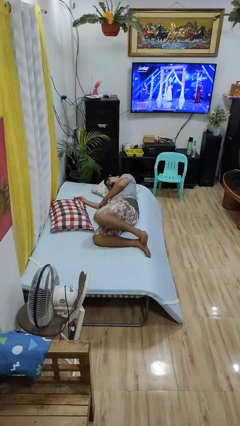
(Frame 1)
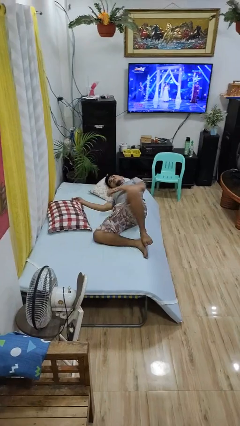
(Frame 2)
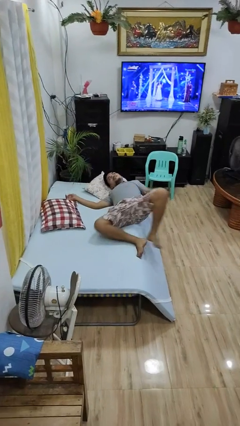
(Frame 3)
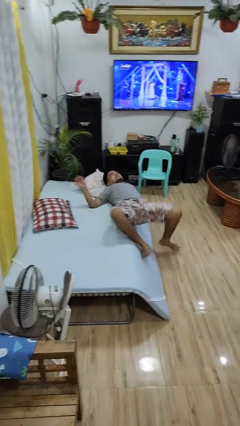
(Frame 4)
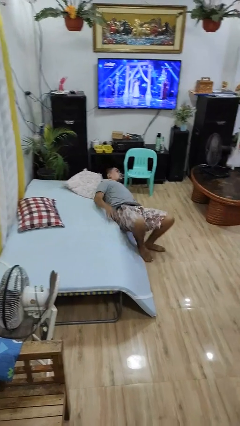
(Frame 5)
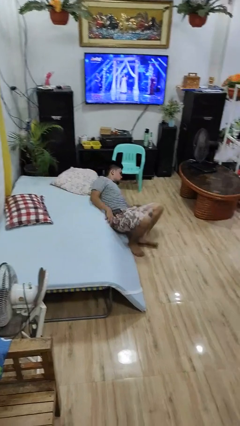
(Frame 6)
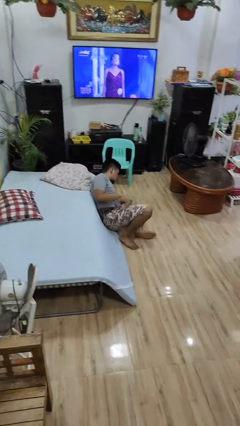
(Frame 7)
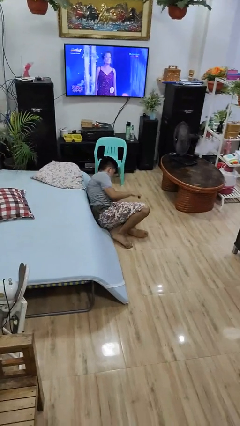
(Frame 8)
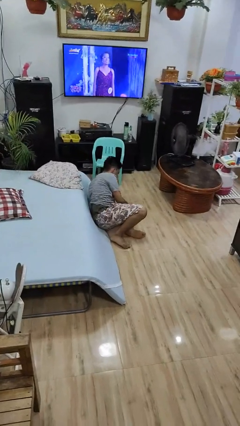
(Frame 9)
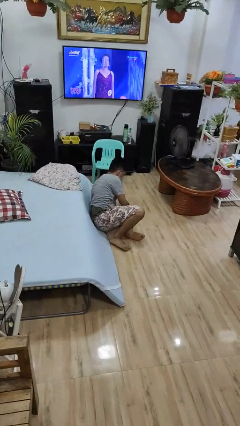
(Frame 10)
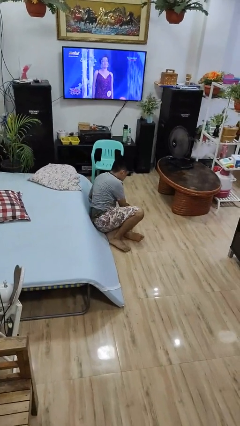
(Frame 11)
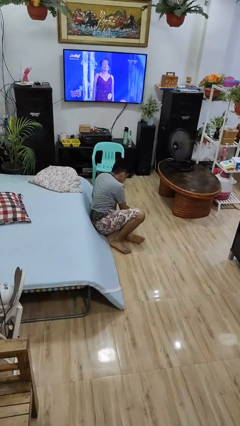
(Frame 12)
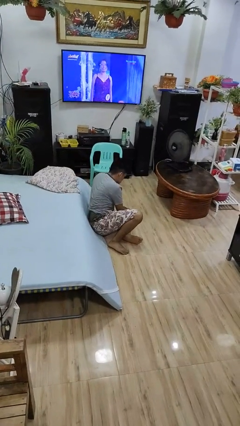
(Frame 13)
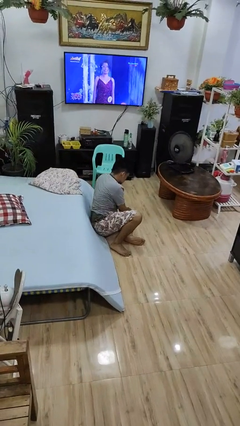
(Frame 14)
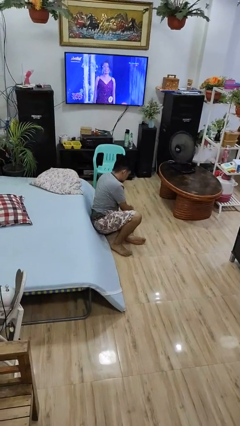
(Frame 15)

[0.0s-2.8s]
person falls from bed

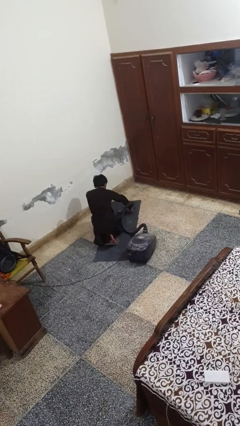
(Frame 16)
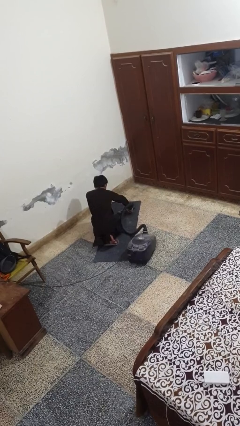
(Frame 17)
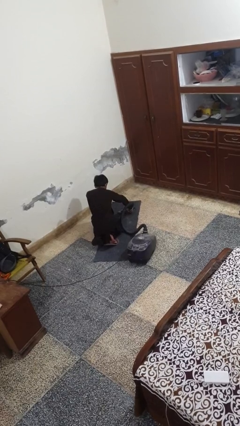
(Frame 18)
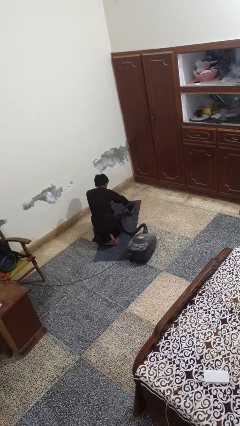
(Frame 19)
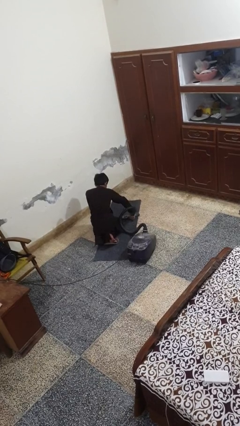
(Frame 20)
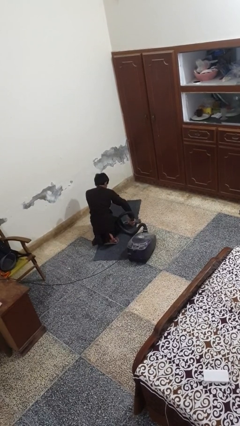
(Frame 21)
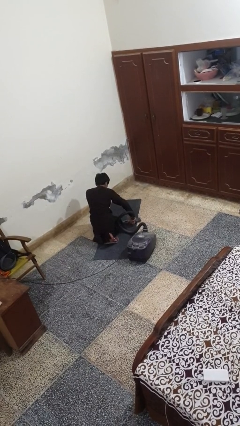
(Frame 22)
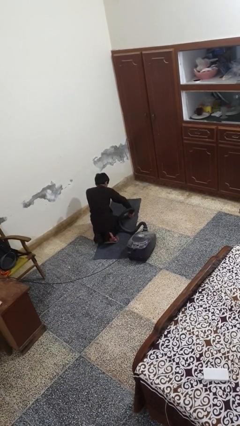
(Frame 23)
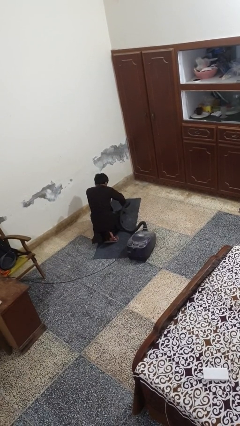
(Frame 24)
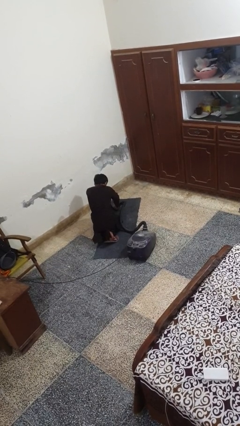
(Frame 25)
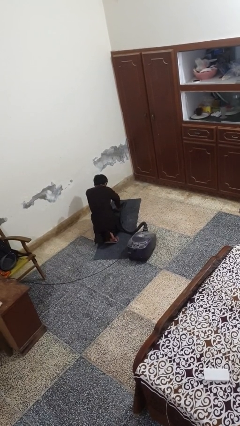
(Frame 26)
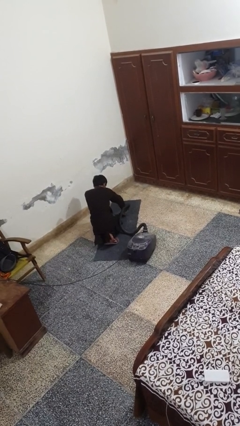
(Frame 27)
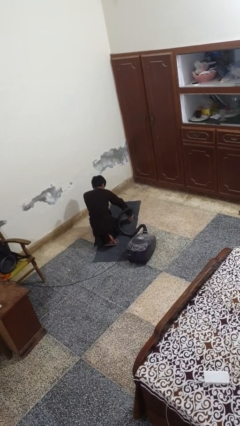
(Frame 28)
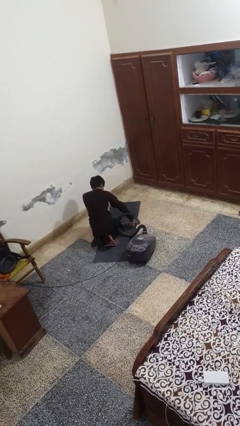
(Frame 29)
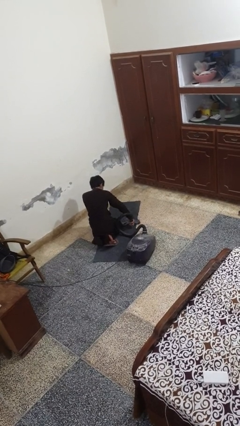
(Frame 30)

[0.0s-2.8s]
person vacuums carpet

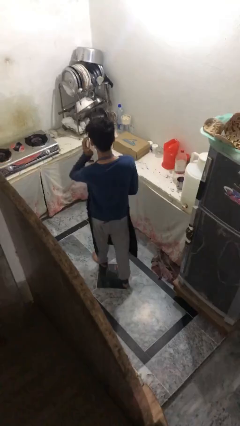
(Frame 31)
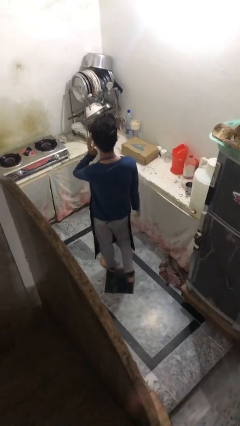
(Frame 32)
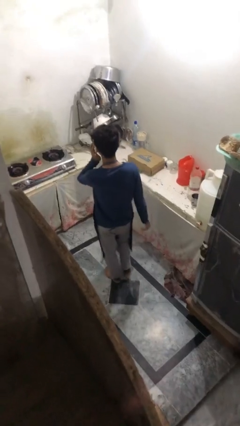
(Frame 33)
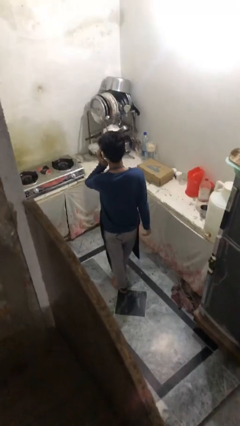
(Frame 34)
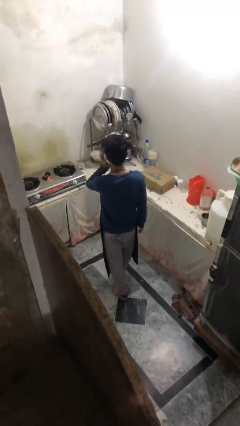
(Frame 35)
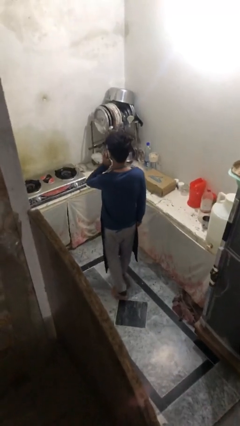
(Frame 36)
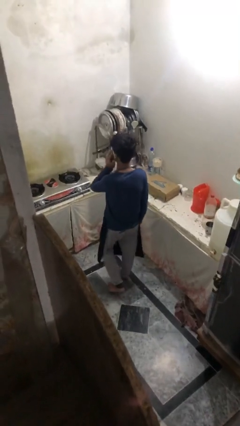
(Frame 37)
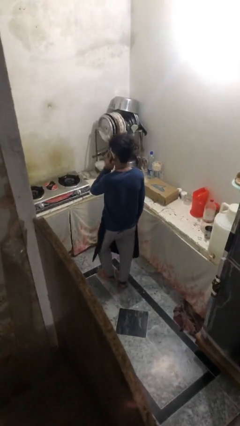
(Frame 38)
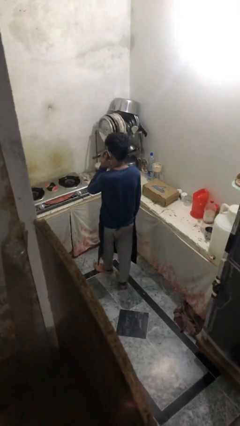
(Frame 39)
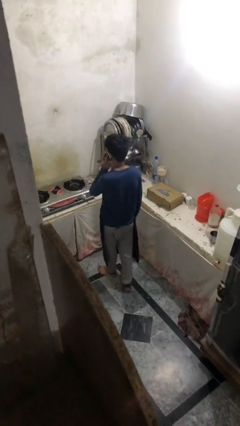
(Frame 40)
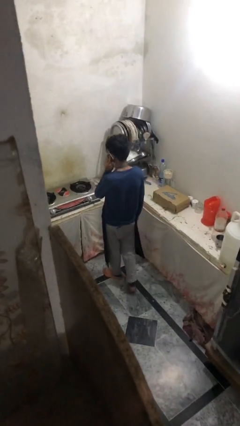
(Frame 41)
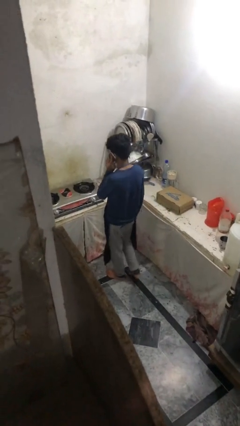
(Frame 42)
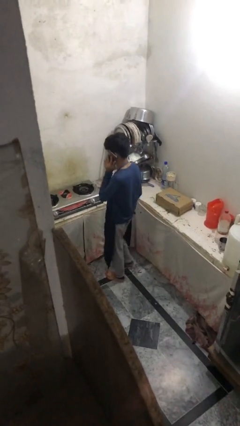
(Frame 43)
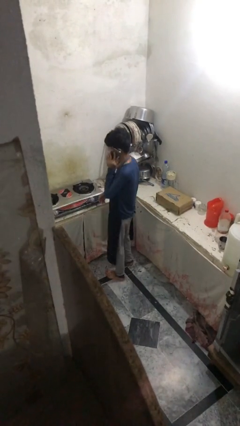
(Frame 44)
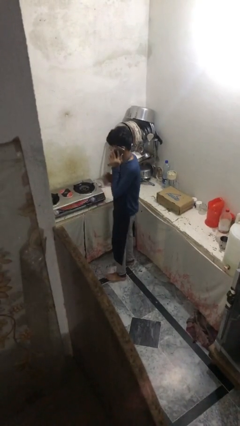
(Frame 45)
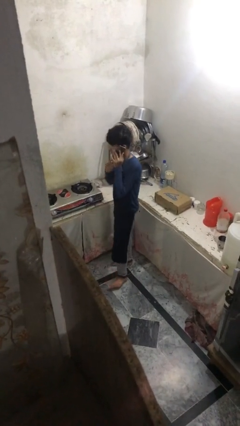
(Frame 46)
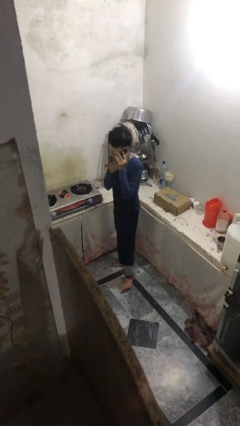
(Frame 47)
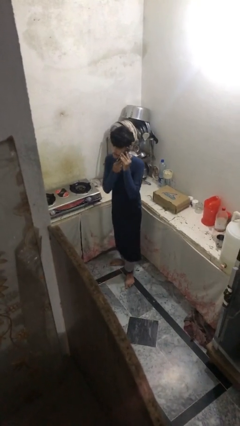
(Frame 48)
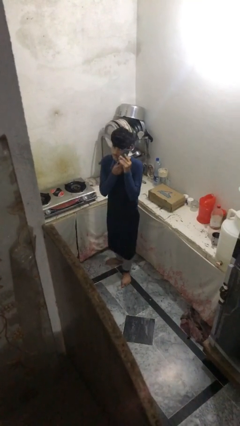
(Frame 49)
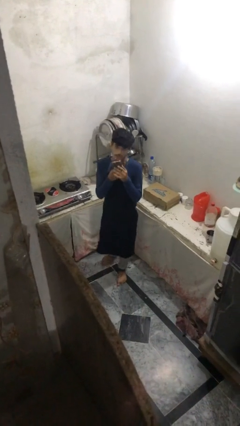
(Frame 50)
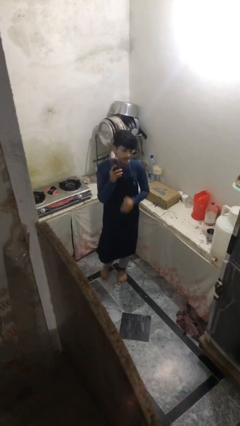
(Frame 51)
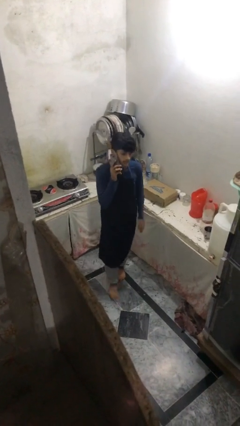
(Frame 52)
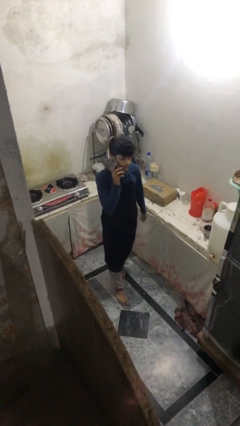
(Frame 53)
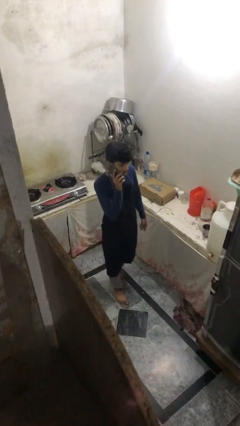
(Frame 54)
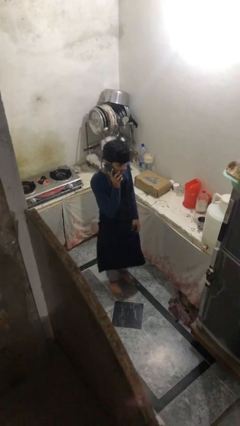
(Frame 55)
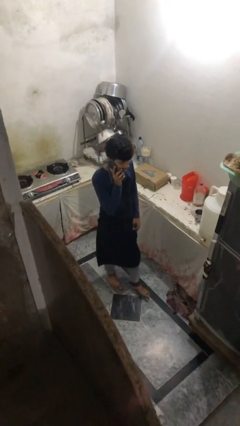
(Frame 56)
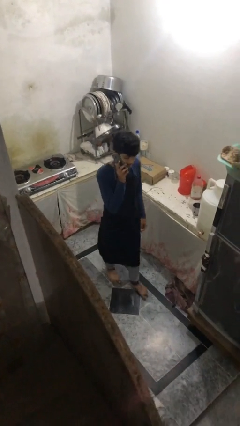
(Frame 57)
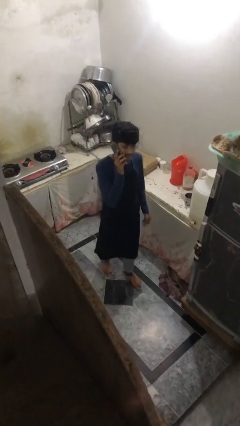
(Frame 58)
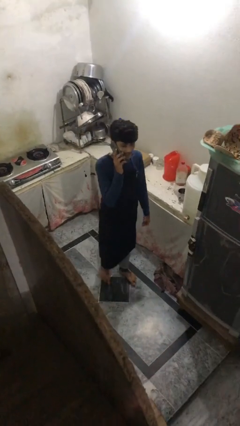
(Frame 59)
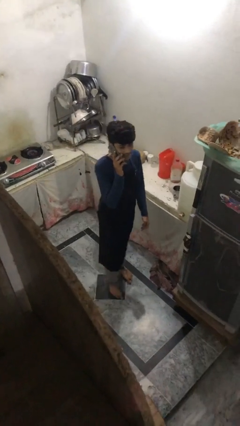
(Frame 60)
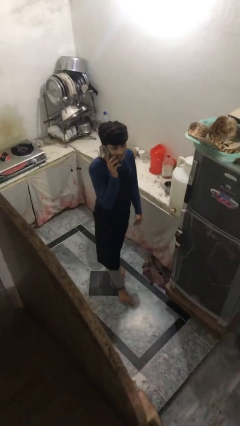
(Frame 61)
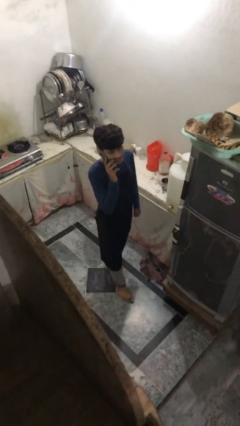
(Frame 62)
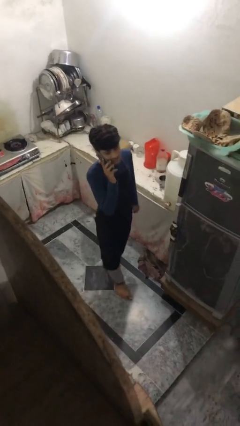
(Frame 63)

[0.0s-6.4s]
person talks on phone

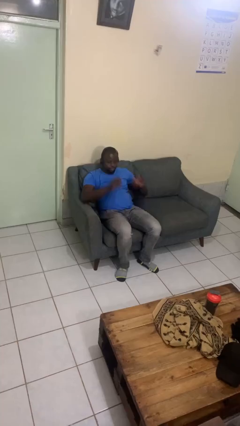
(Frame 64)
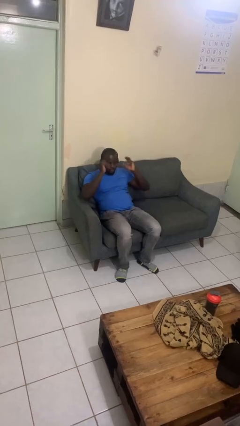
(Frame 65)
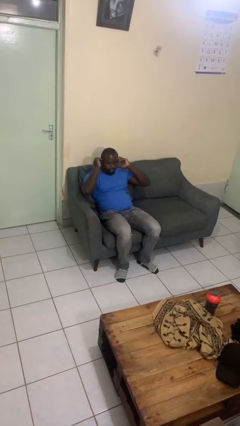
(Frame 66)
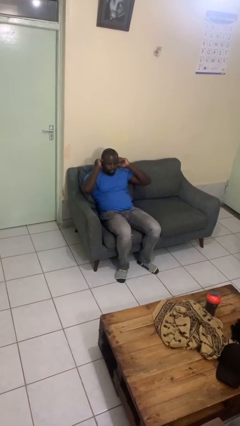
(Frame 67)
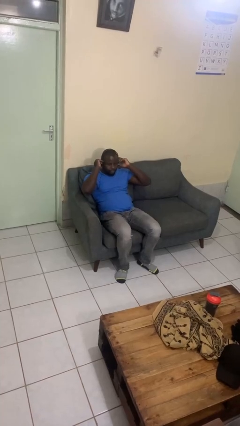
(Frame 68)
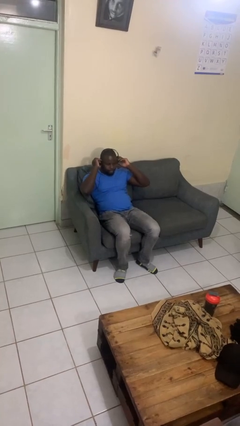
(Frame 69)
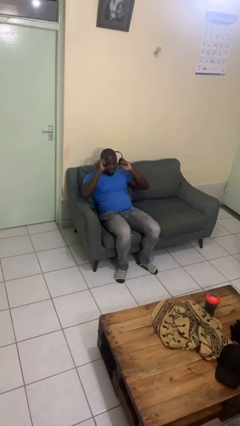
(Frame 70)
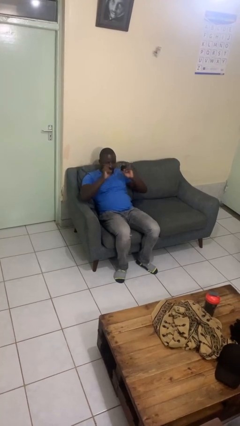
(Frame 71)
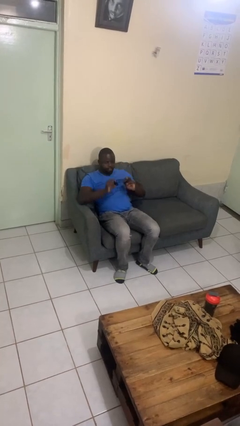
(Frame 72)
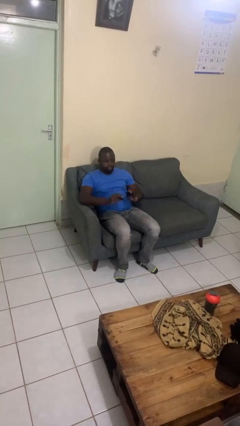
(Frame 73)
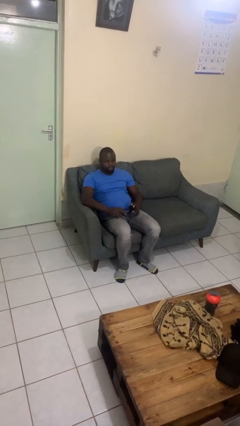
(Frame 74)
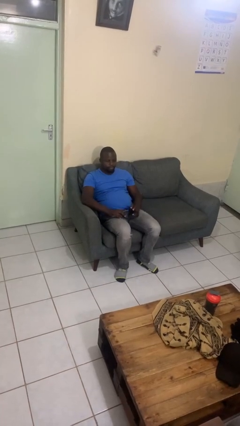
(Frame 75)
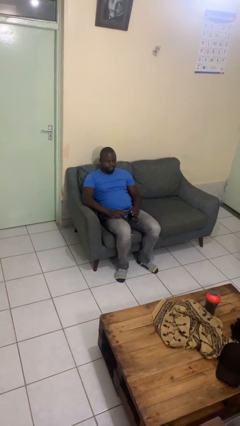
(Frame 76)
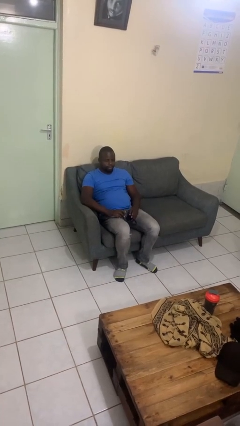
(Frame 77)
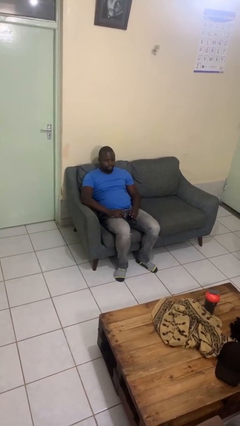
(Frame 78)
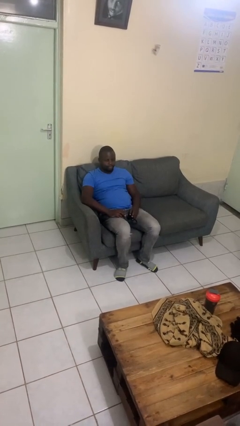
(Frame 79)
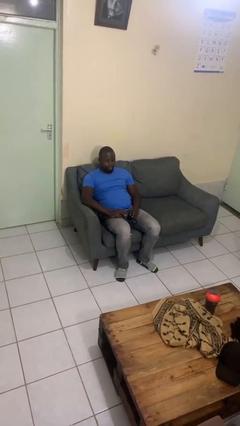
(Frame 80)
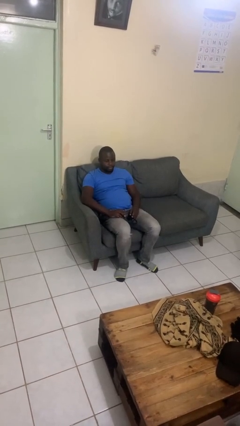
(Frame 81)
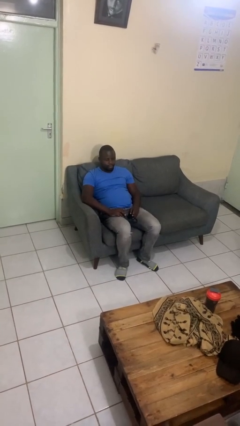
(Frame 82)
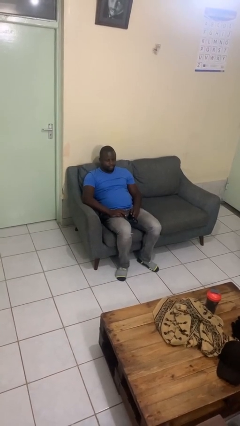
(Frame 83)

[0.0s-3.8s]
person takes off headphones

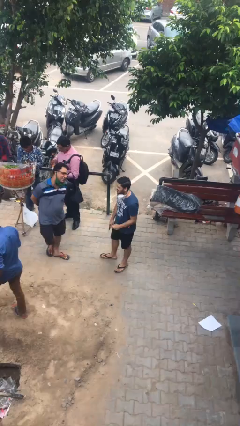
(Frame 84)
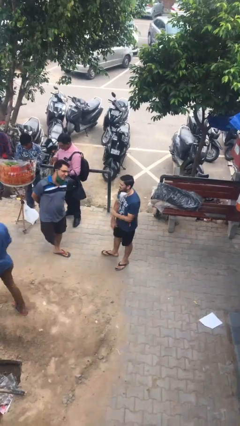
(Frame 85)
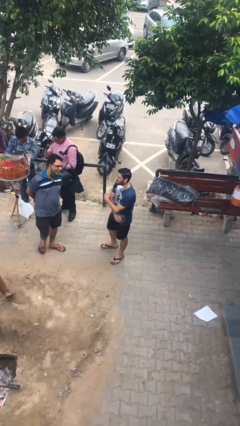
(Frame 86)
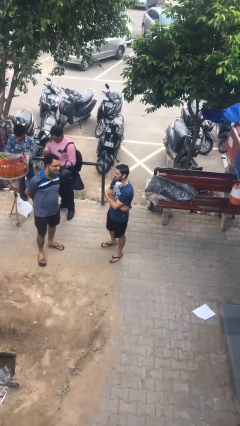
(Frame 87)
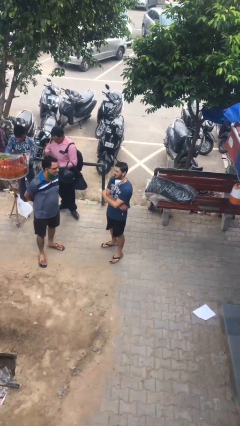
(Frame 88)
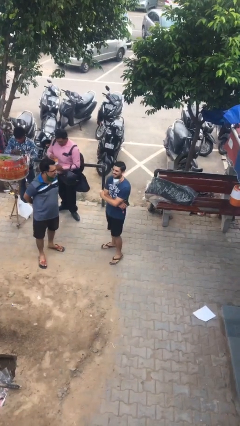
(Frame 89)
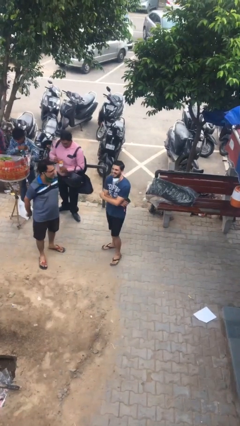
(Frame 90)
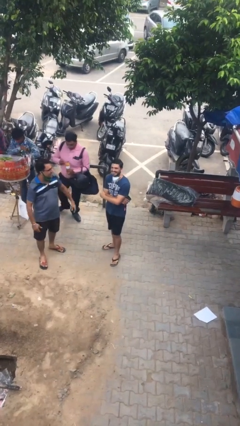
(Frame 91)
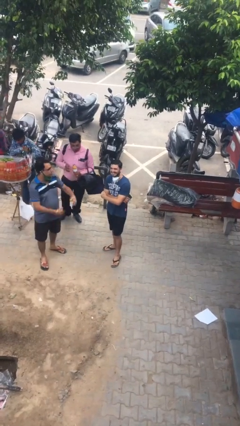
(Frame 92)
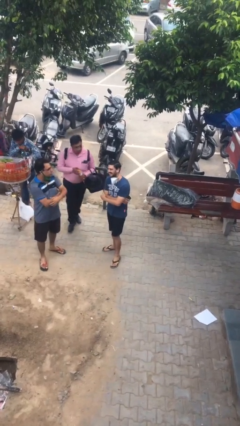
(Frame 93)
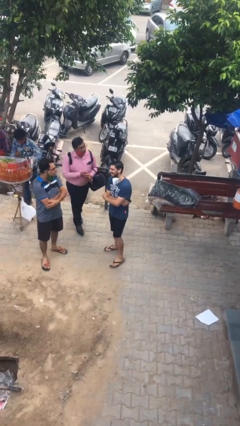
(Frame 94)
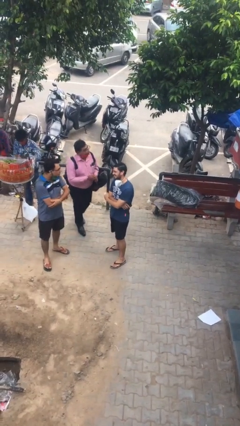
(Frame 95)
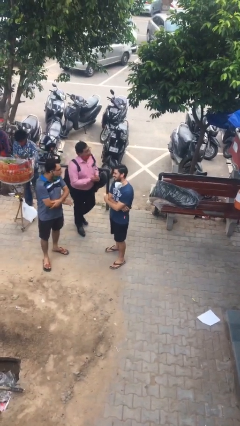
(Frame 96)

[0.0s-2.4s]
person laughs with person
